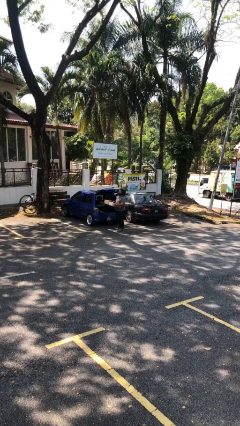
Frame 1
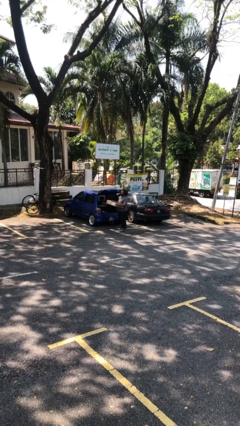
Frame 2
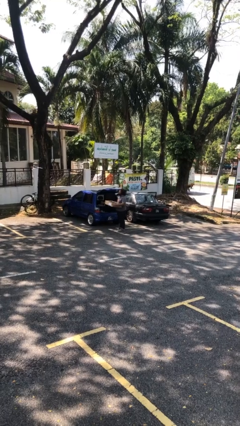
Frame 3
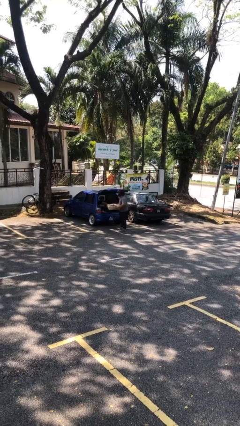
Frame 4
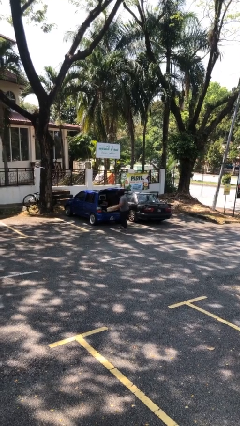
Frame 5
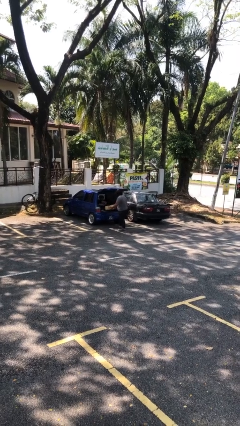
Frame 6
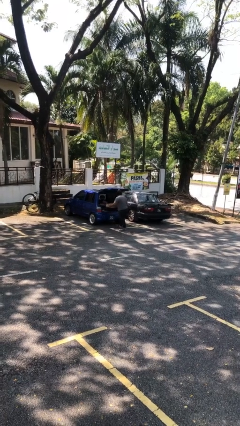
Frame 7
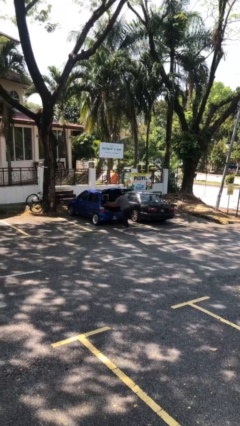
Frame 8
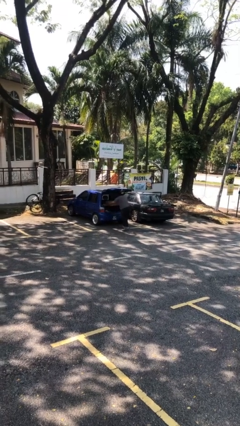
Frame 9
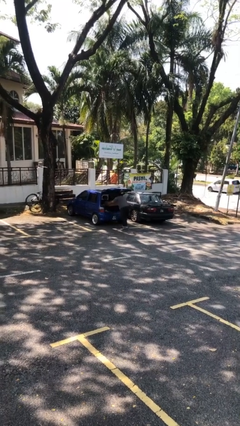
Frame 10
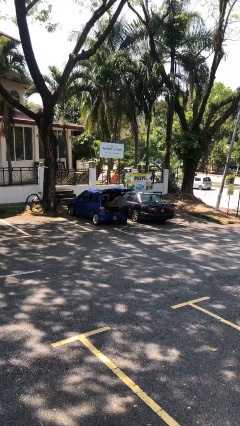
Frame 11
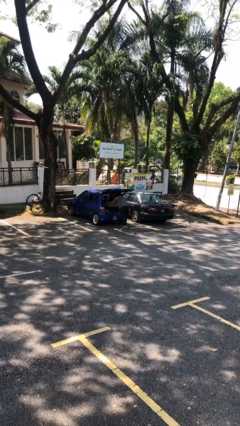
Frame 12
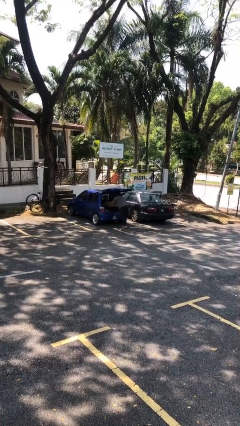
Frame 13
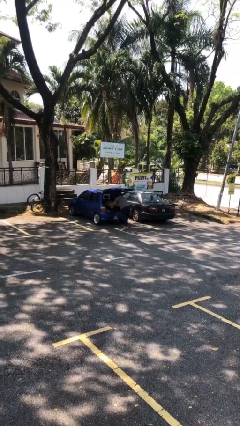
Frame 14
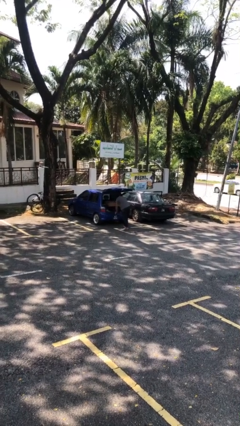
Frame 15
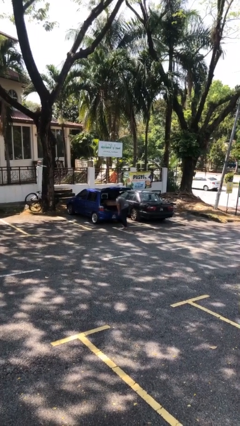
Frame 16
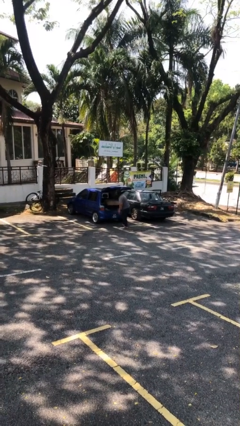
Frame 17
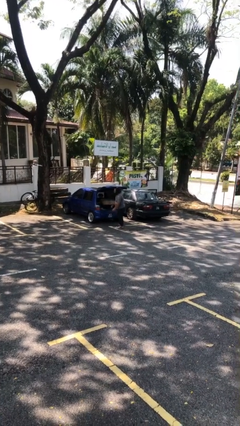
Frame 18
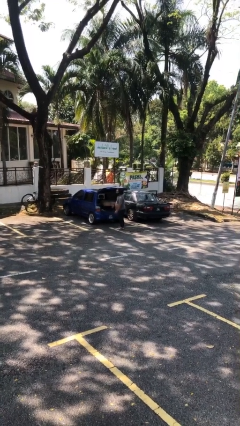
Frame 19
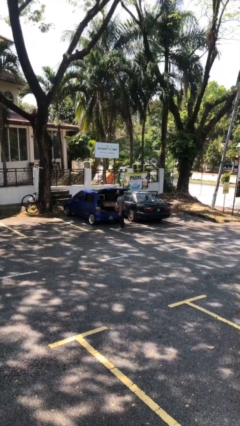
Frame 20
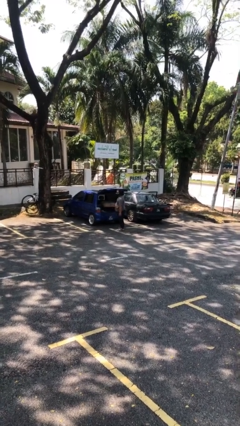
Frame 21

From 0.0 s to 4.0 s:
person loads car

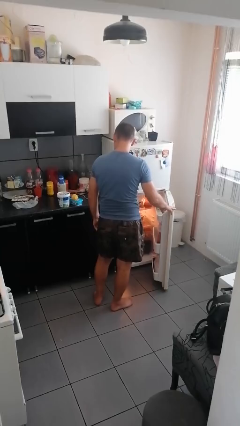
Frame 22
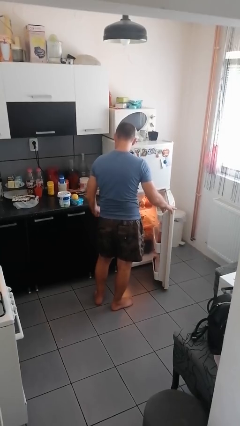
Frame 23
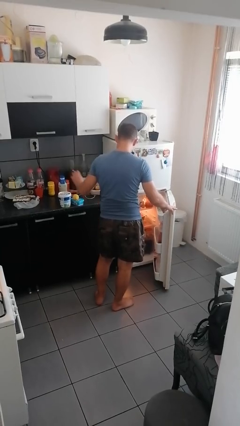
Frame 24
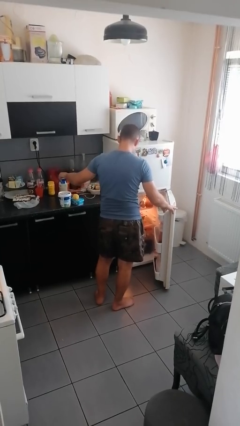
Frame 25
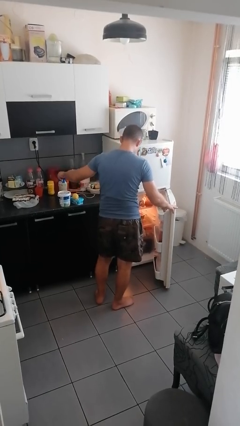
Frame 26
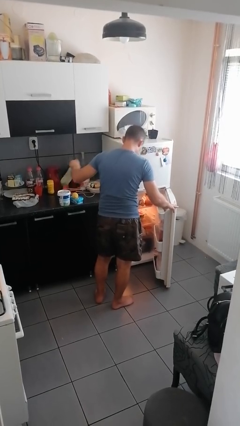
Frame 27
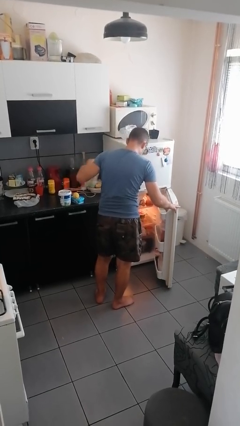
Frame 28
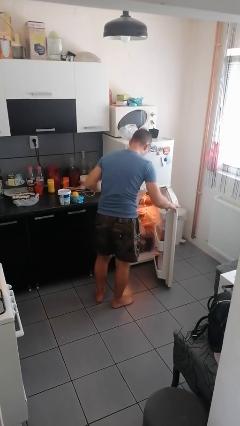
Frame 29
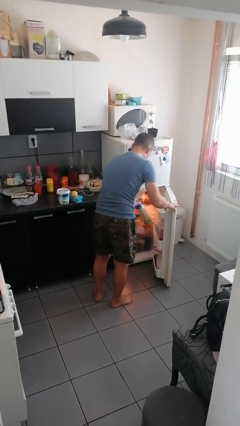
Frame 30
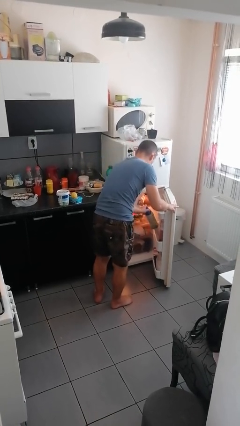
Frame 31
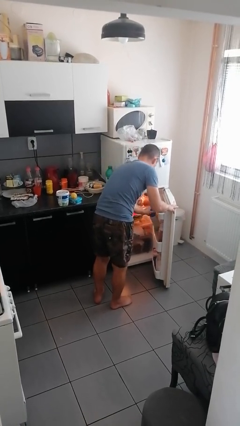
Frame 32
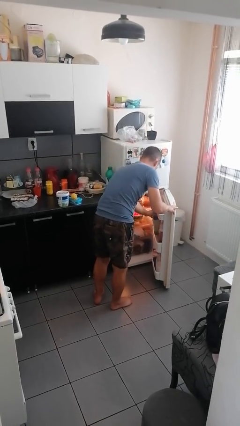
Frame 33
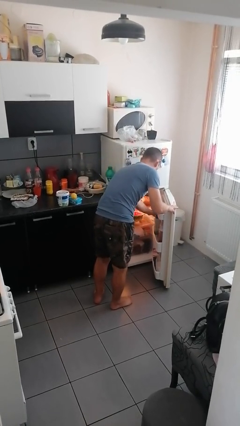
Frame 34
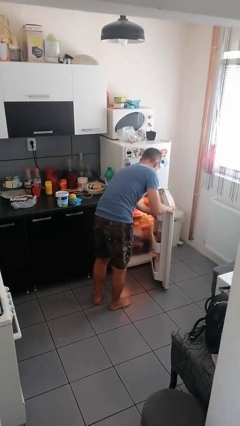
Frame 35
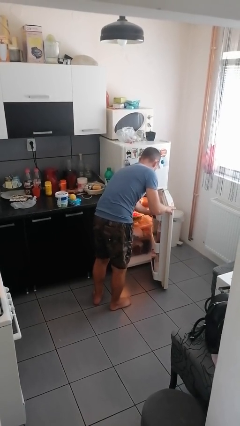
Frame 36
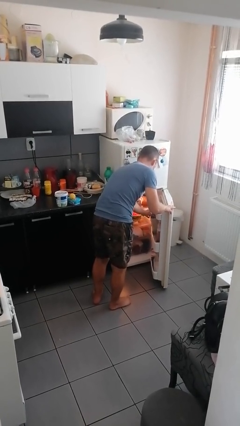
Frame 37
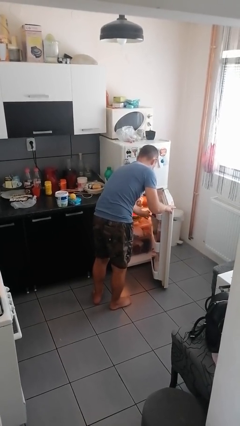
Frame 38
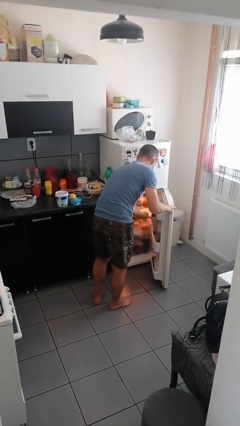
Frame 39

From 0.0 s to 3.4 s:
person loads groceries into refrigerator

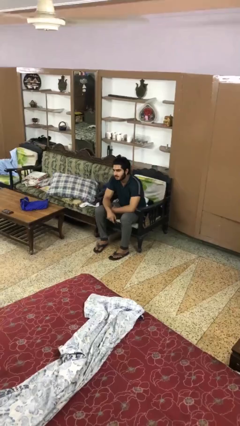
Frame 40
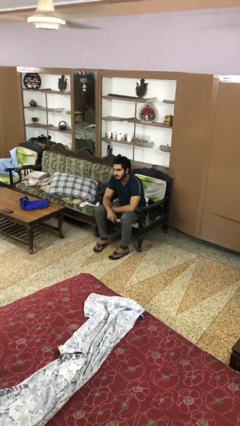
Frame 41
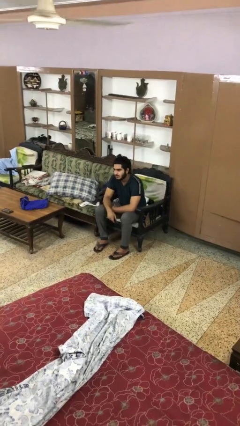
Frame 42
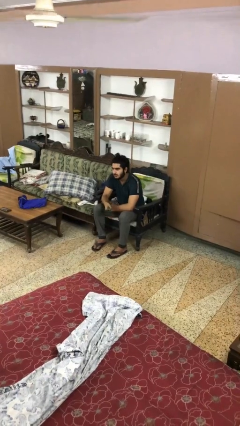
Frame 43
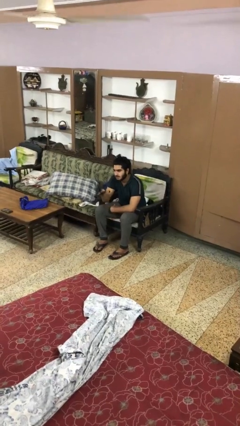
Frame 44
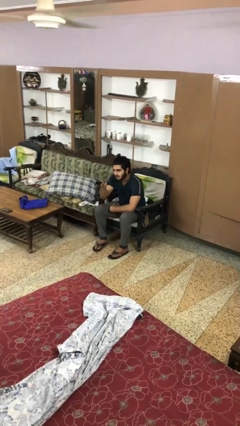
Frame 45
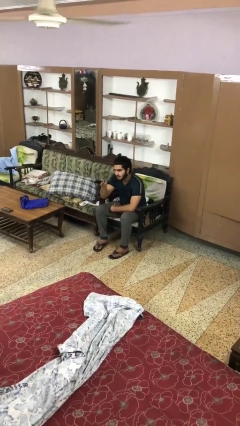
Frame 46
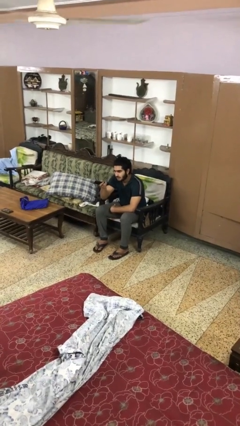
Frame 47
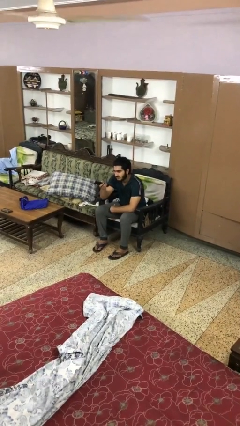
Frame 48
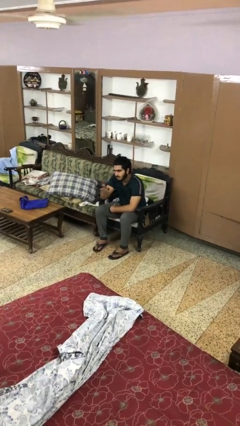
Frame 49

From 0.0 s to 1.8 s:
person uses television remote

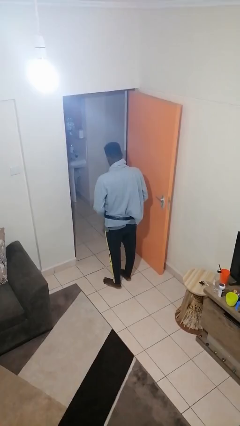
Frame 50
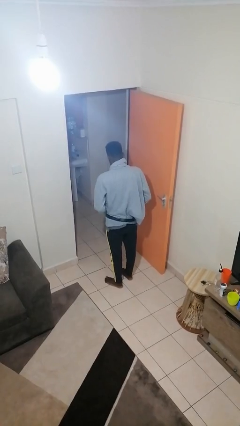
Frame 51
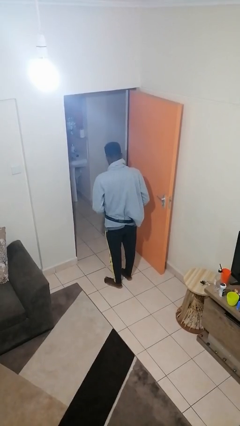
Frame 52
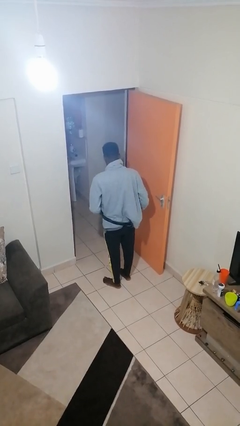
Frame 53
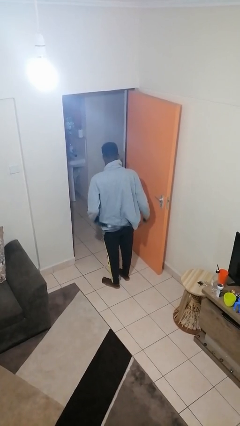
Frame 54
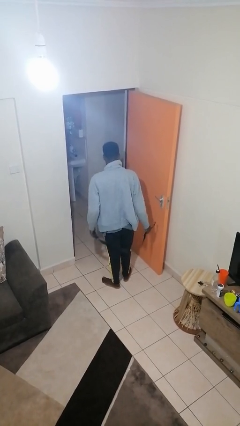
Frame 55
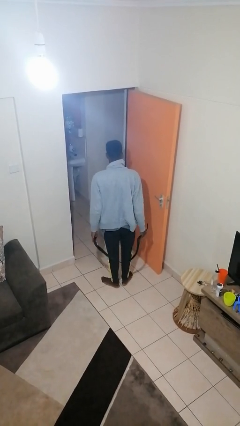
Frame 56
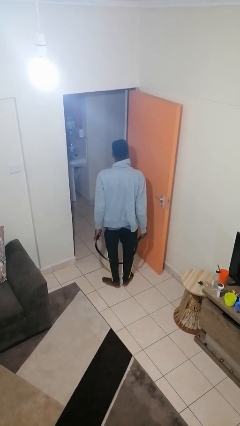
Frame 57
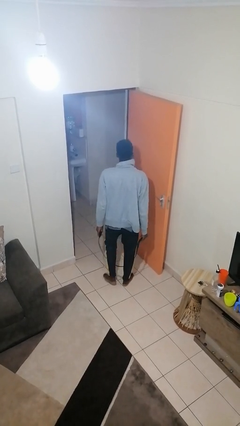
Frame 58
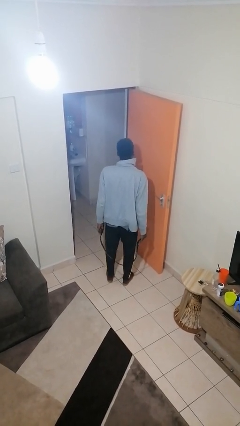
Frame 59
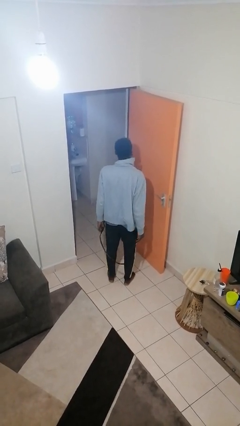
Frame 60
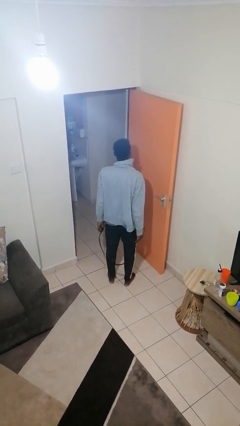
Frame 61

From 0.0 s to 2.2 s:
person takes off belt

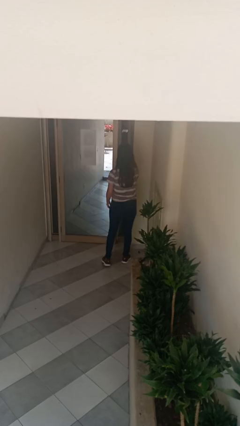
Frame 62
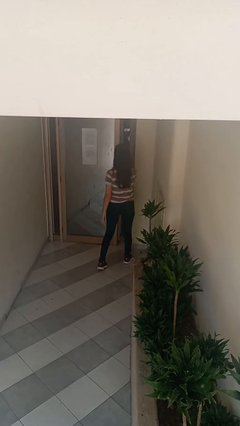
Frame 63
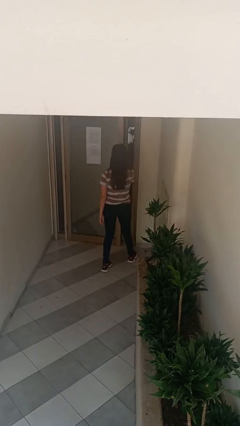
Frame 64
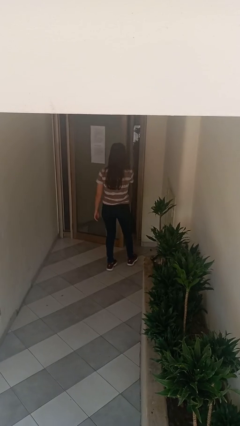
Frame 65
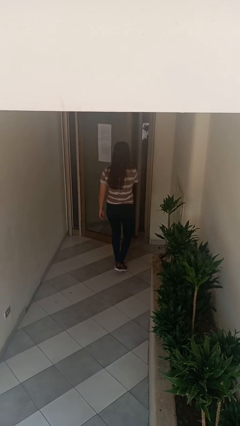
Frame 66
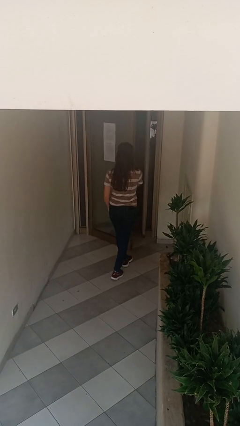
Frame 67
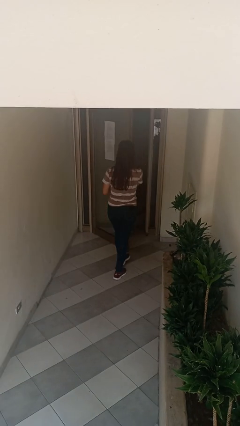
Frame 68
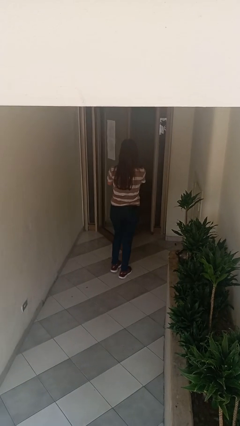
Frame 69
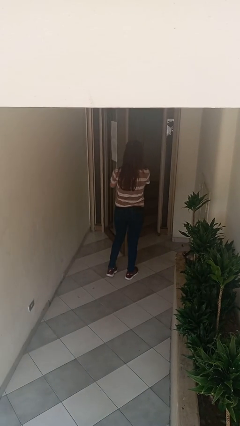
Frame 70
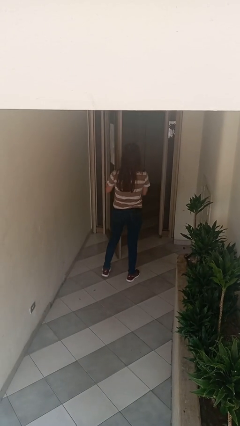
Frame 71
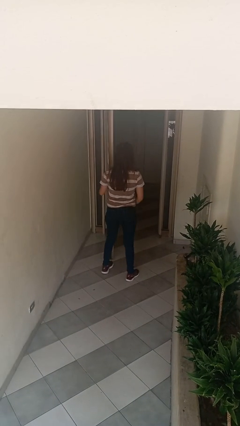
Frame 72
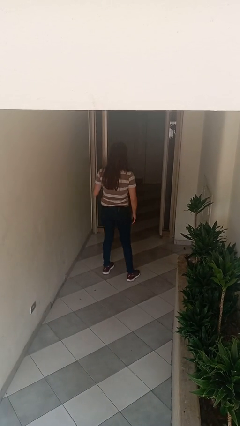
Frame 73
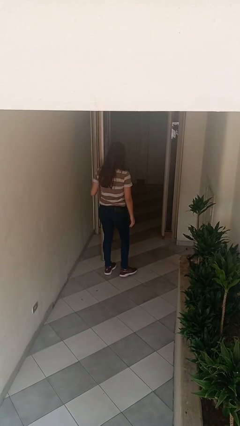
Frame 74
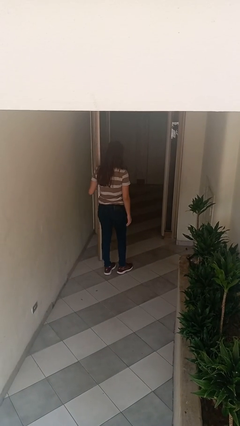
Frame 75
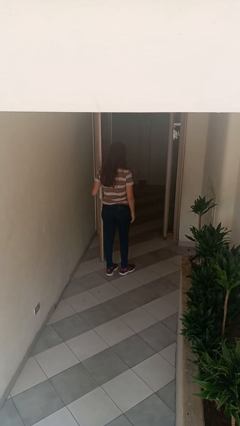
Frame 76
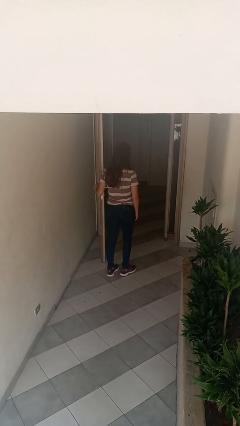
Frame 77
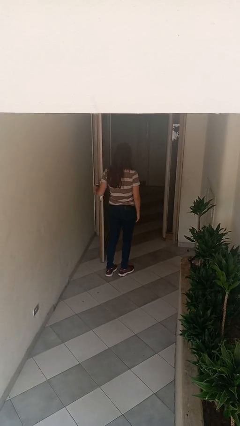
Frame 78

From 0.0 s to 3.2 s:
person opens facility door

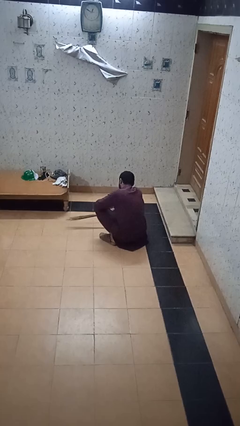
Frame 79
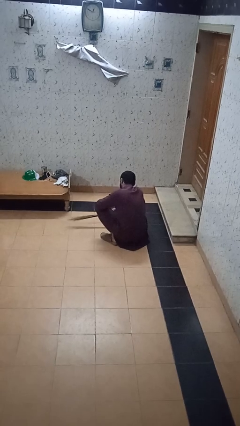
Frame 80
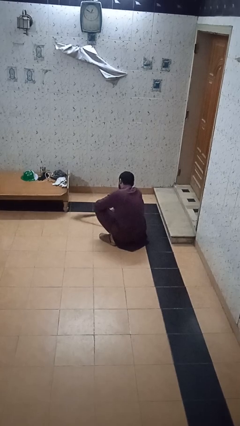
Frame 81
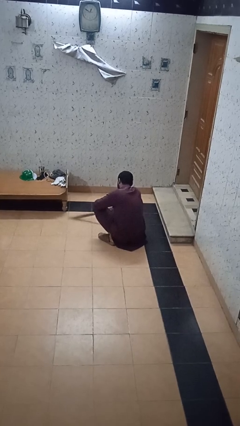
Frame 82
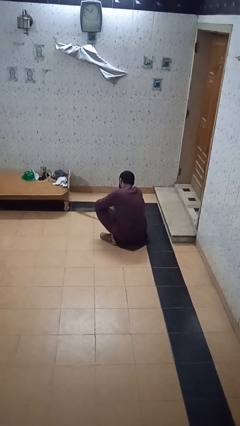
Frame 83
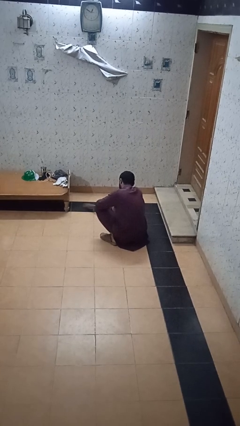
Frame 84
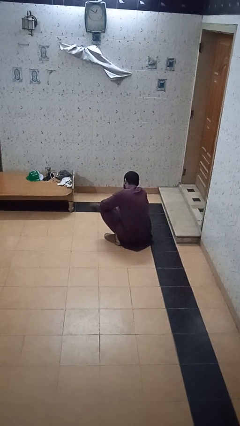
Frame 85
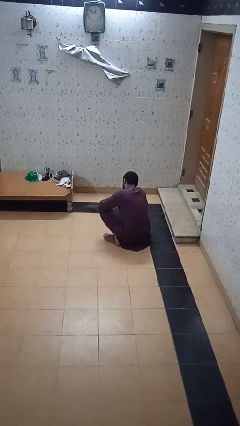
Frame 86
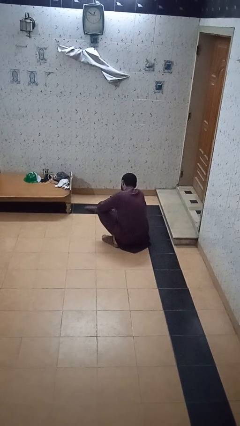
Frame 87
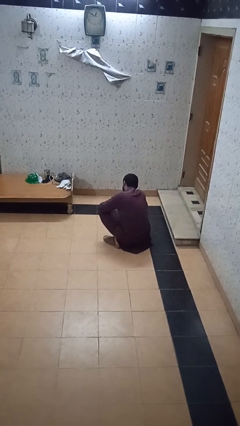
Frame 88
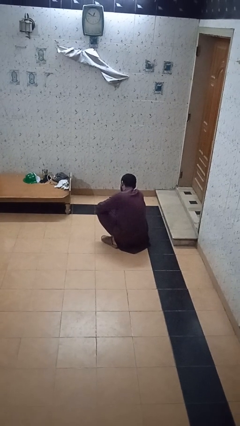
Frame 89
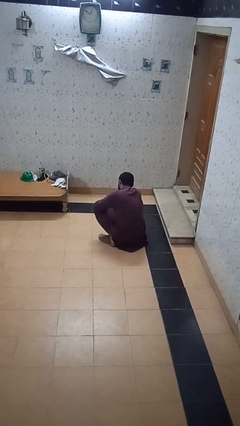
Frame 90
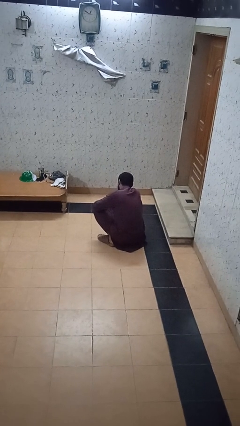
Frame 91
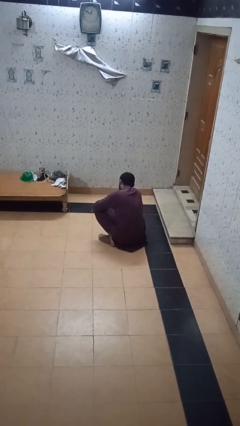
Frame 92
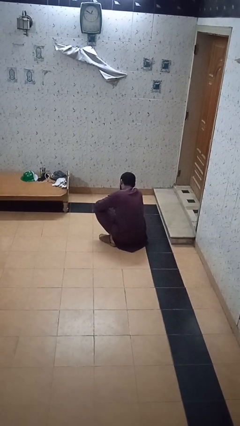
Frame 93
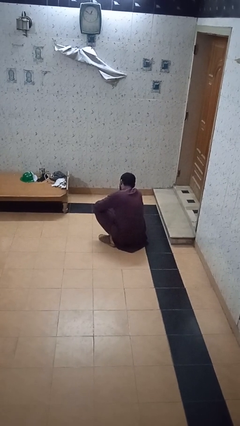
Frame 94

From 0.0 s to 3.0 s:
person sweeps floor

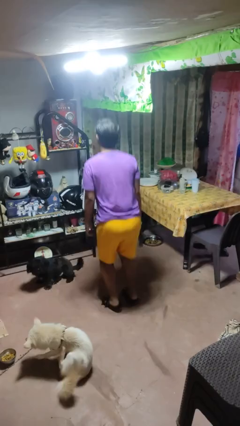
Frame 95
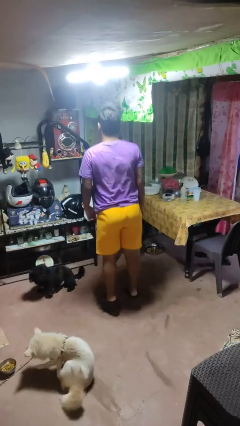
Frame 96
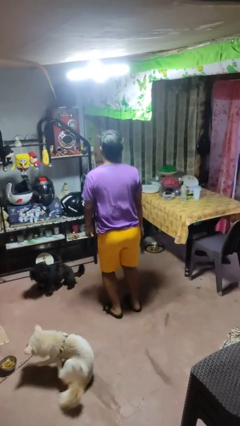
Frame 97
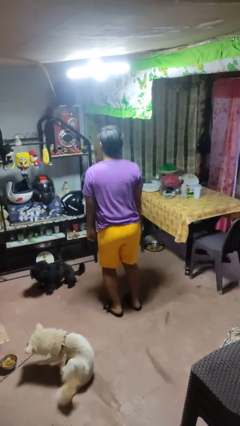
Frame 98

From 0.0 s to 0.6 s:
person jumps
